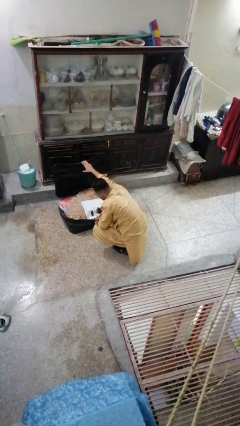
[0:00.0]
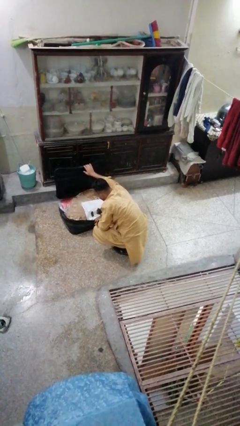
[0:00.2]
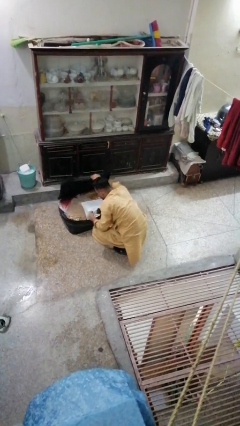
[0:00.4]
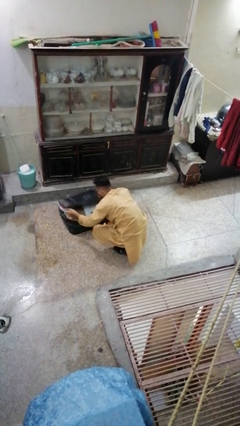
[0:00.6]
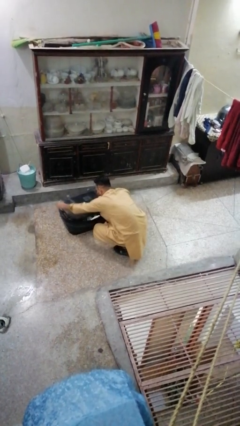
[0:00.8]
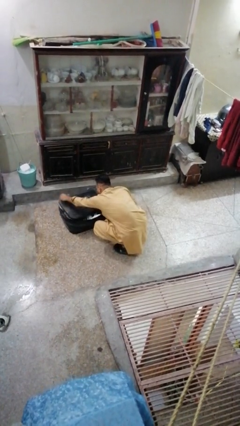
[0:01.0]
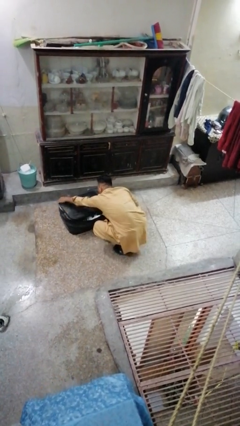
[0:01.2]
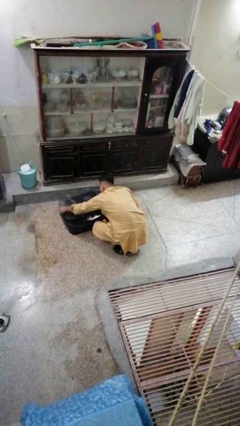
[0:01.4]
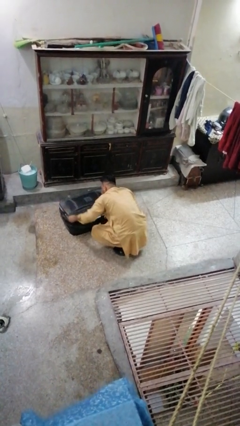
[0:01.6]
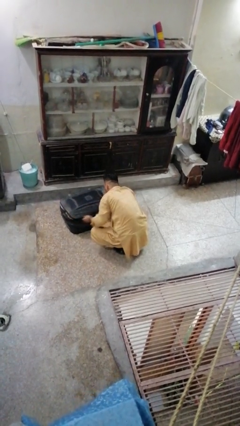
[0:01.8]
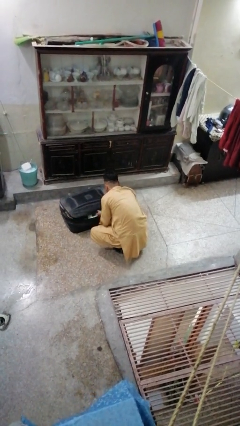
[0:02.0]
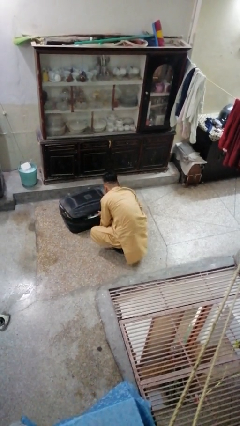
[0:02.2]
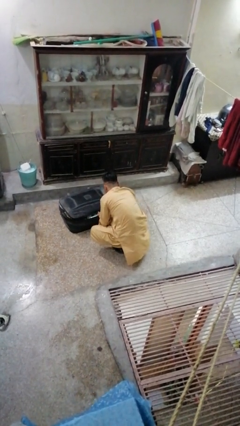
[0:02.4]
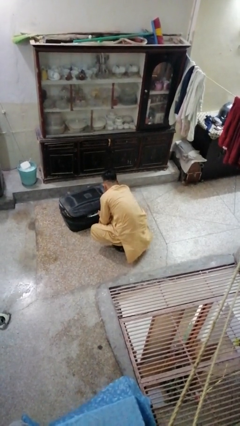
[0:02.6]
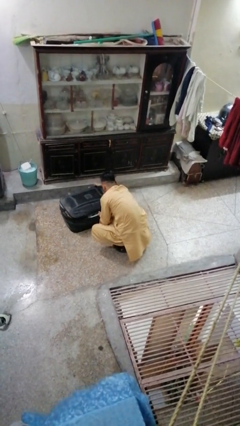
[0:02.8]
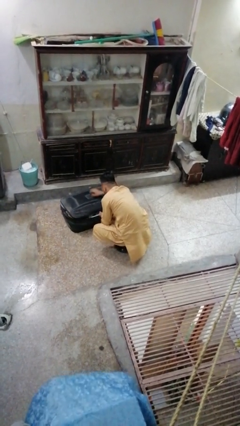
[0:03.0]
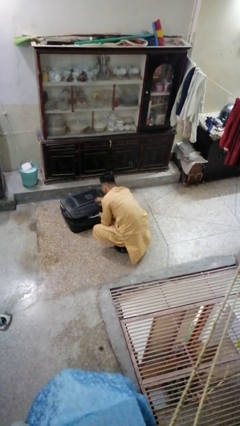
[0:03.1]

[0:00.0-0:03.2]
person closes suitcase

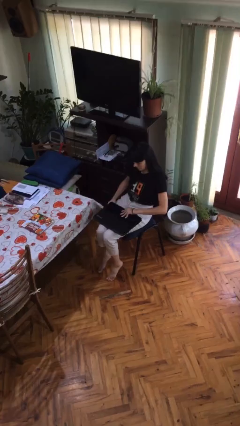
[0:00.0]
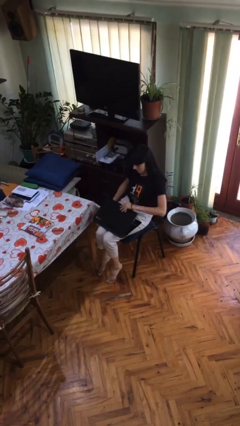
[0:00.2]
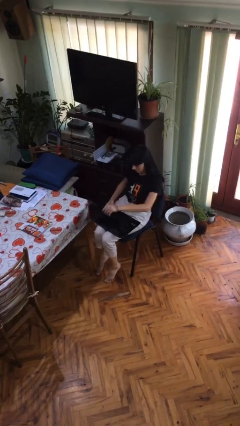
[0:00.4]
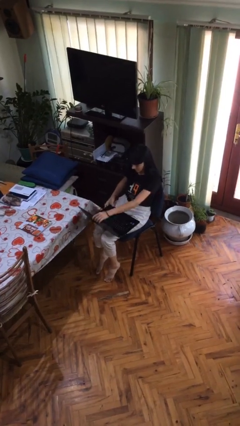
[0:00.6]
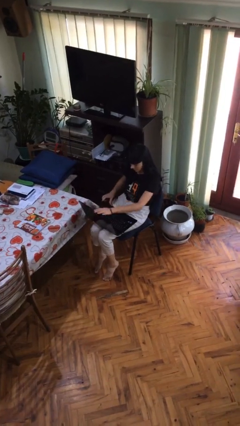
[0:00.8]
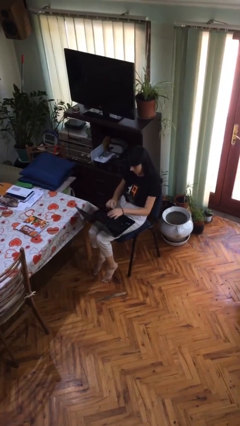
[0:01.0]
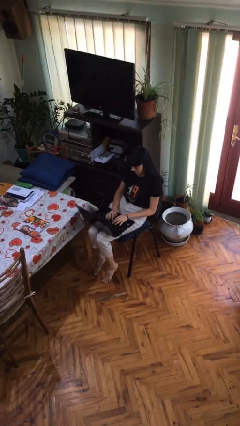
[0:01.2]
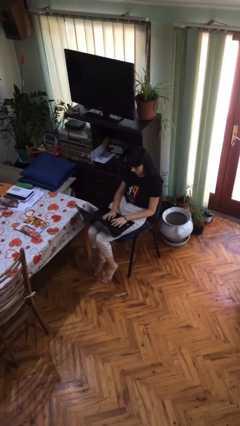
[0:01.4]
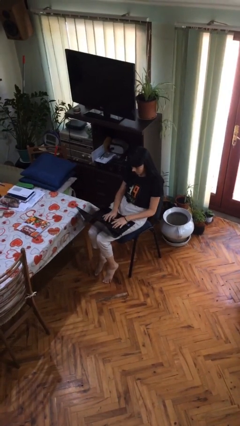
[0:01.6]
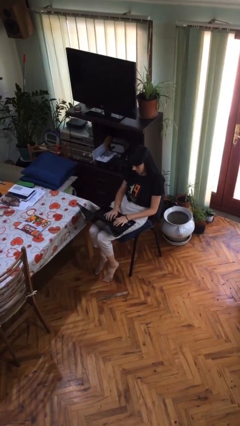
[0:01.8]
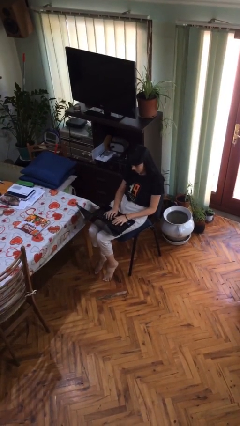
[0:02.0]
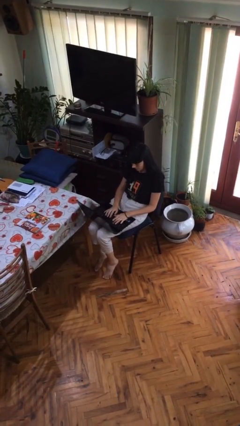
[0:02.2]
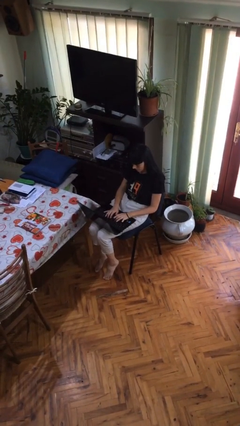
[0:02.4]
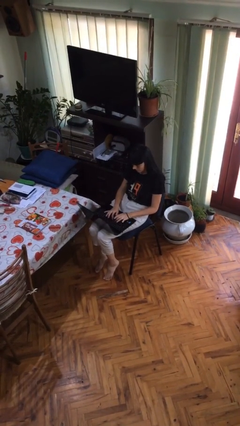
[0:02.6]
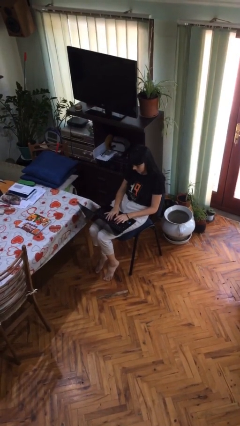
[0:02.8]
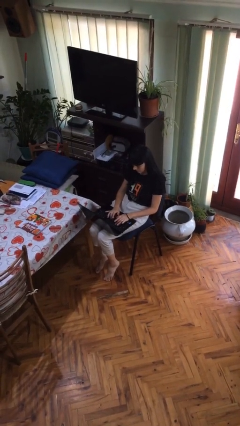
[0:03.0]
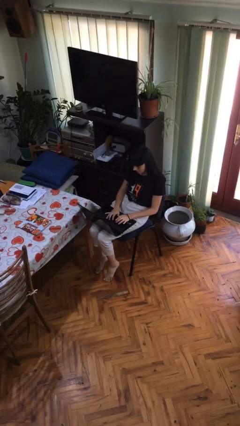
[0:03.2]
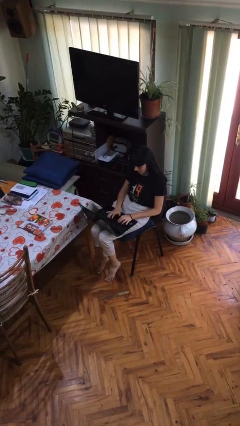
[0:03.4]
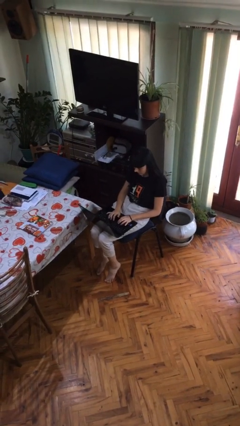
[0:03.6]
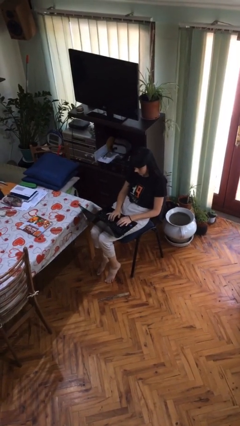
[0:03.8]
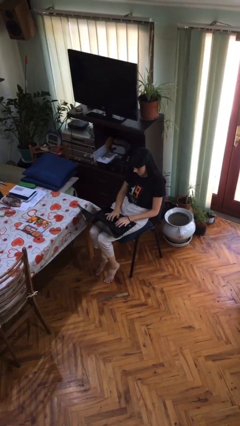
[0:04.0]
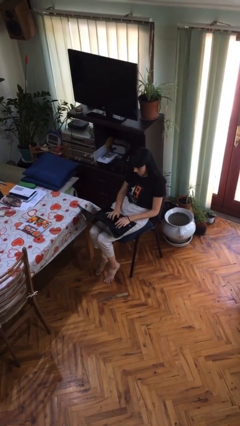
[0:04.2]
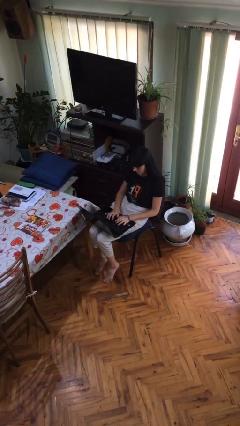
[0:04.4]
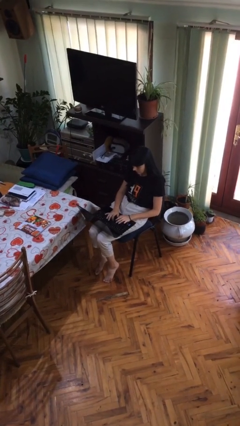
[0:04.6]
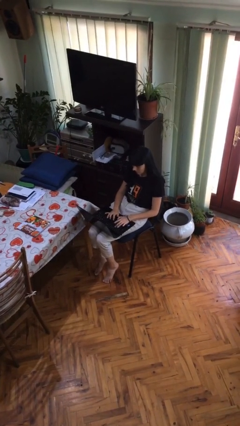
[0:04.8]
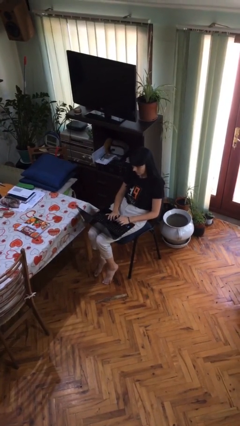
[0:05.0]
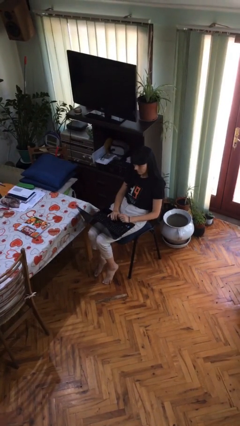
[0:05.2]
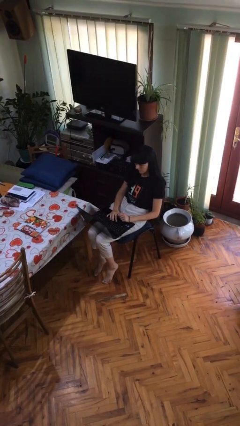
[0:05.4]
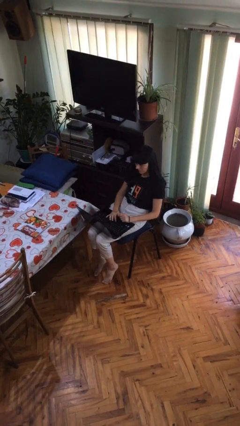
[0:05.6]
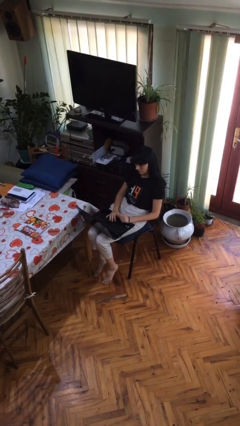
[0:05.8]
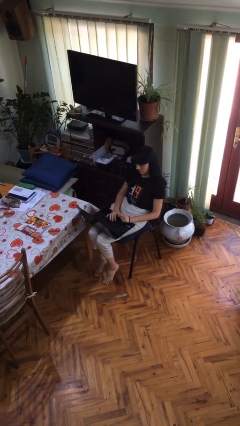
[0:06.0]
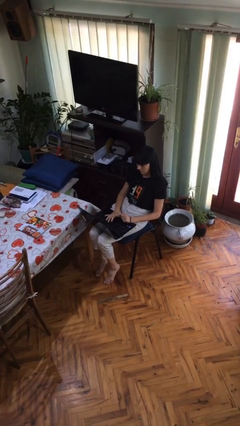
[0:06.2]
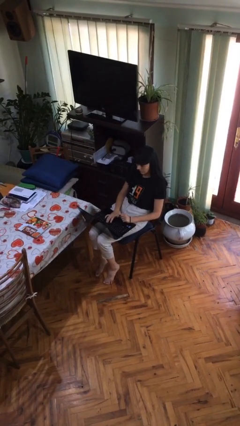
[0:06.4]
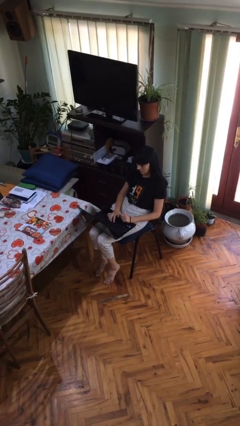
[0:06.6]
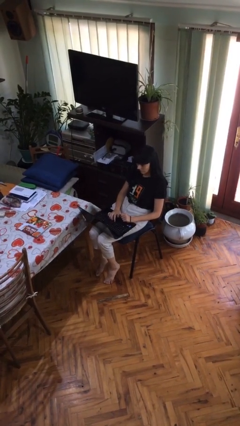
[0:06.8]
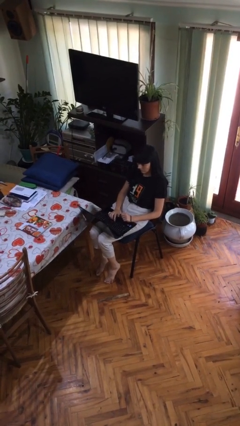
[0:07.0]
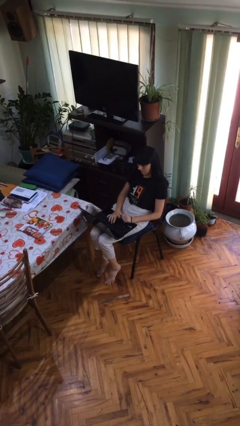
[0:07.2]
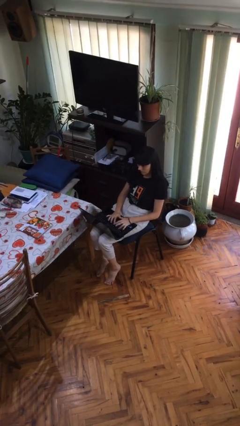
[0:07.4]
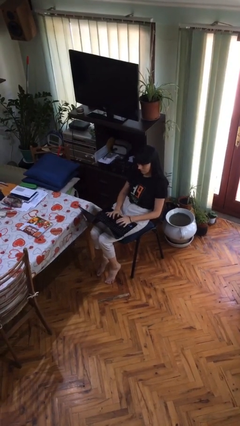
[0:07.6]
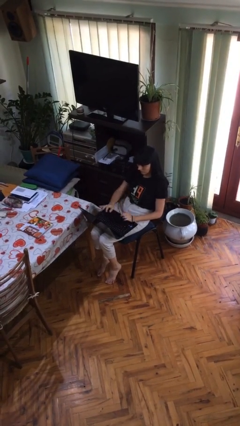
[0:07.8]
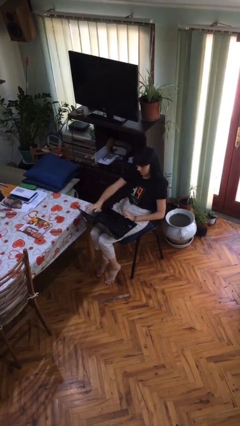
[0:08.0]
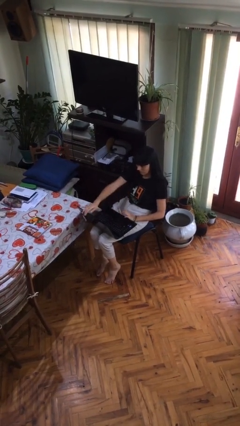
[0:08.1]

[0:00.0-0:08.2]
person interacts with laptop

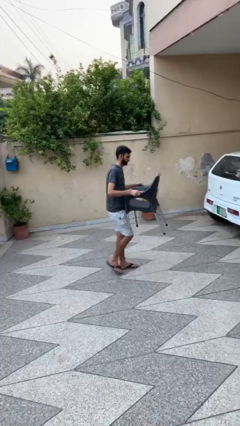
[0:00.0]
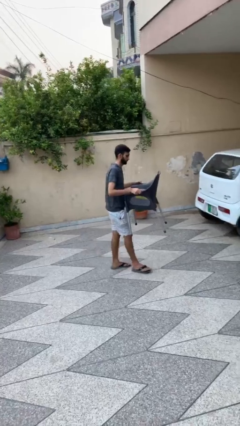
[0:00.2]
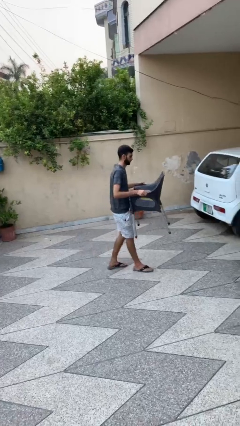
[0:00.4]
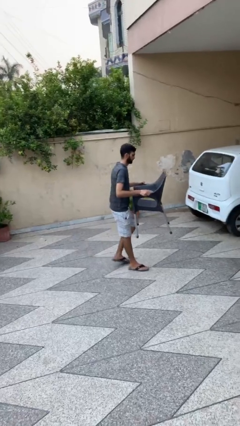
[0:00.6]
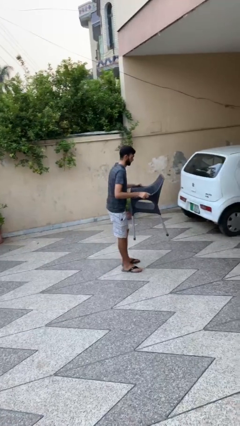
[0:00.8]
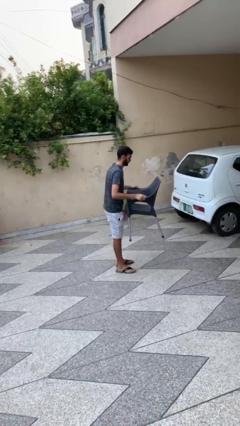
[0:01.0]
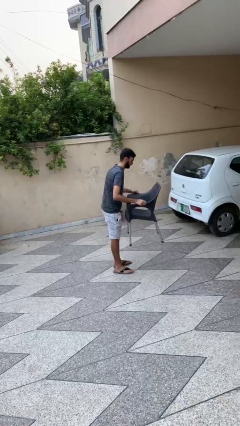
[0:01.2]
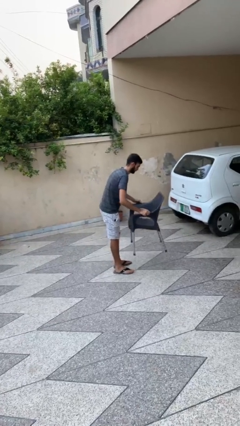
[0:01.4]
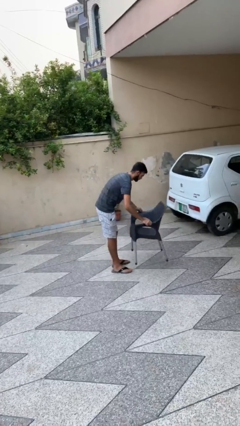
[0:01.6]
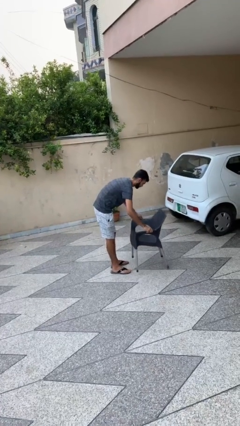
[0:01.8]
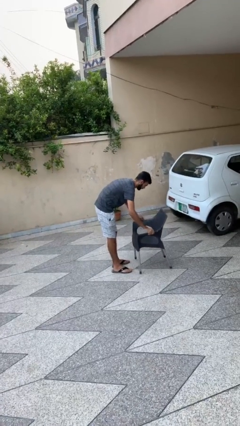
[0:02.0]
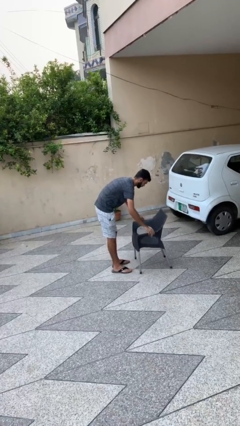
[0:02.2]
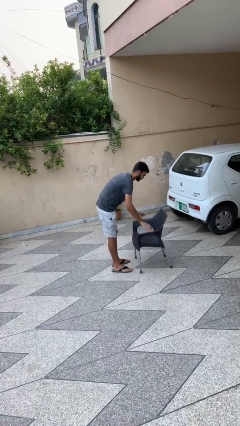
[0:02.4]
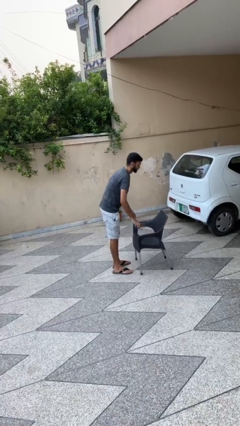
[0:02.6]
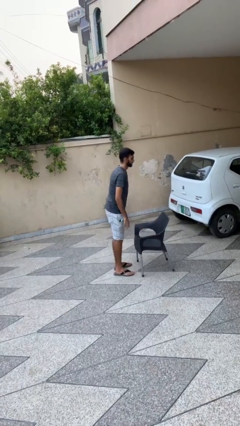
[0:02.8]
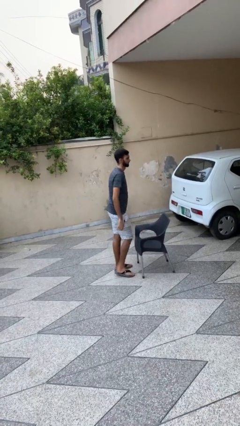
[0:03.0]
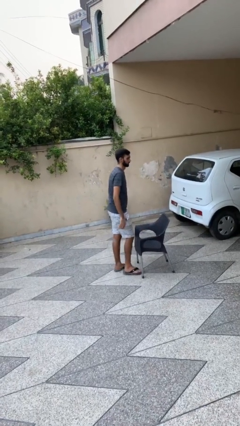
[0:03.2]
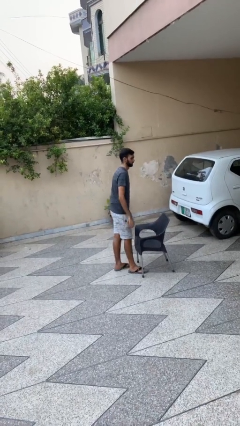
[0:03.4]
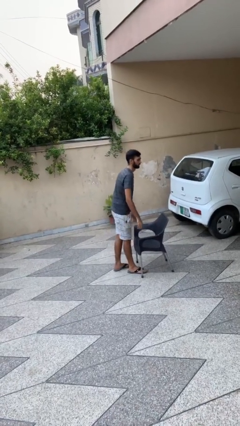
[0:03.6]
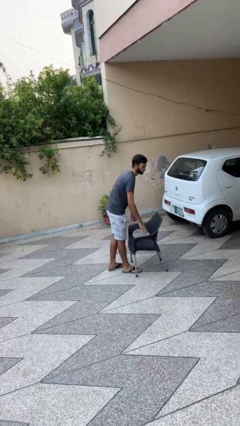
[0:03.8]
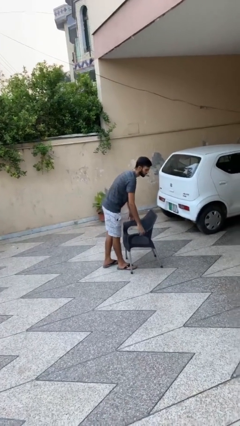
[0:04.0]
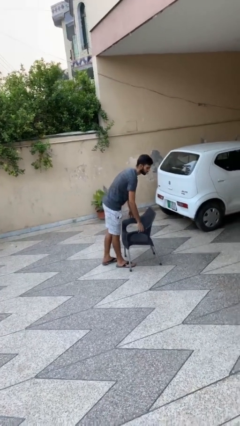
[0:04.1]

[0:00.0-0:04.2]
person puts down object on floor

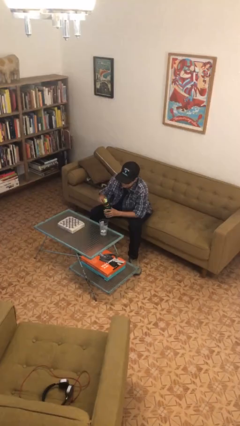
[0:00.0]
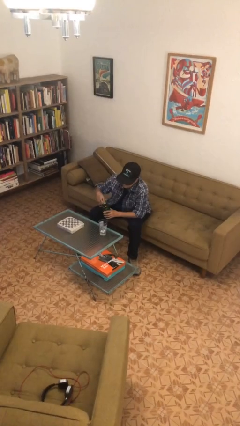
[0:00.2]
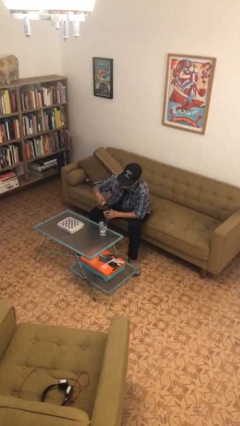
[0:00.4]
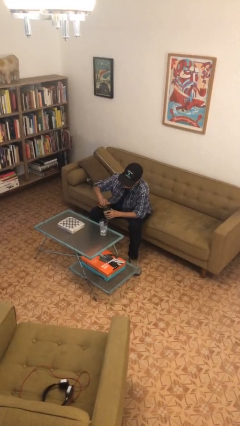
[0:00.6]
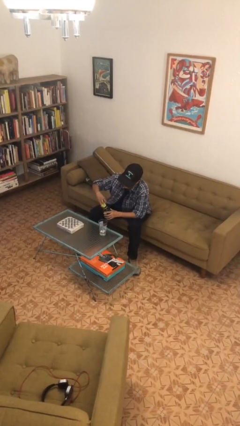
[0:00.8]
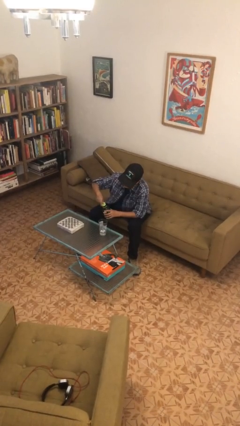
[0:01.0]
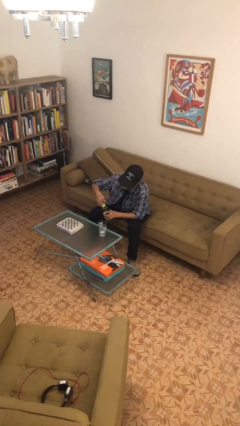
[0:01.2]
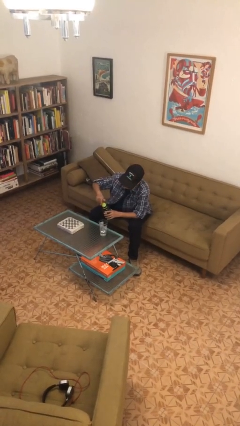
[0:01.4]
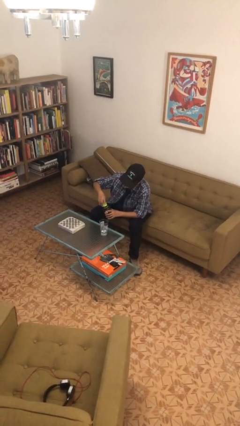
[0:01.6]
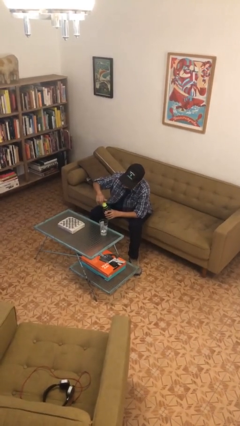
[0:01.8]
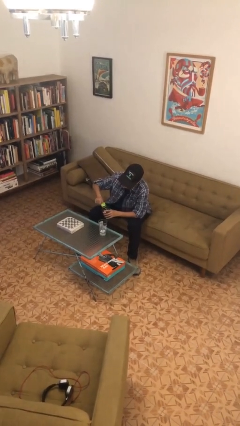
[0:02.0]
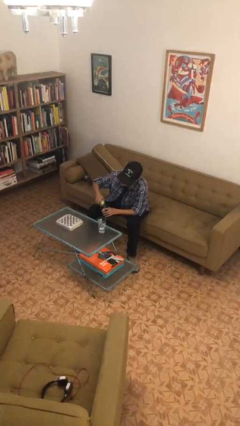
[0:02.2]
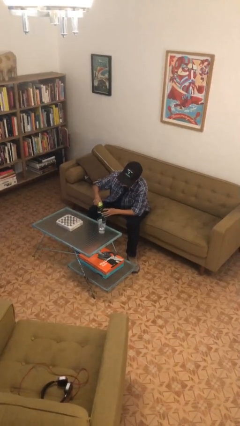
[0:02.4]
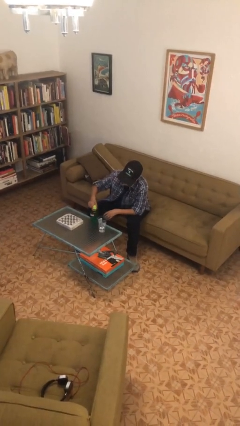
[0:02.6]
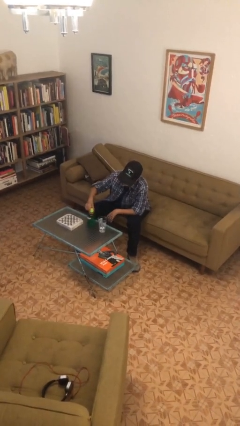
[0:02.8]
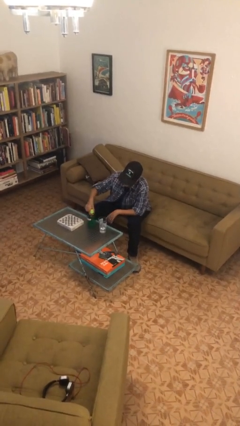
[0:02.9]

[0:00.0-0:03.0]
person screws lid to bottle
